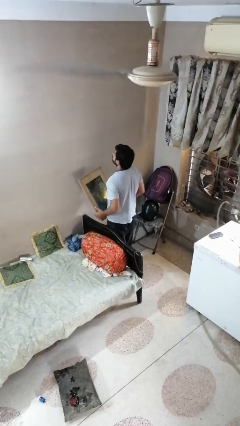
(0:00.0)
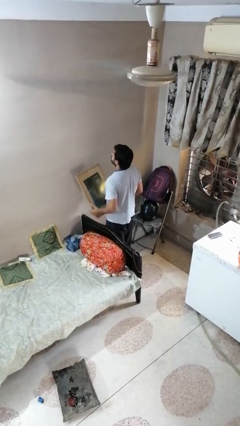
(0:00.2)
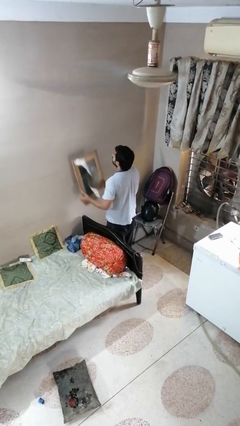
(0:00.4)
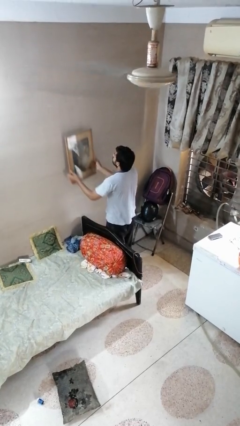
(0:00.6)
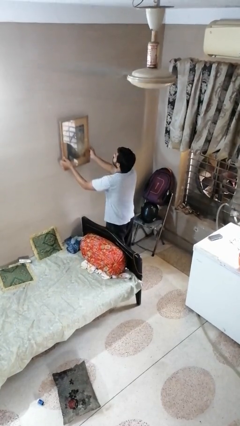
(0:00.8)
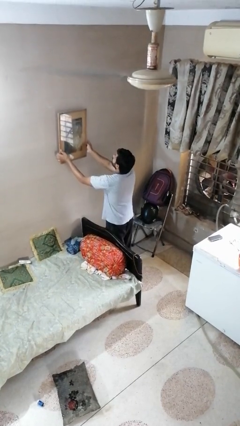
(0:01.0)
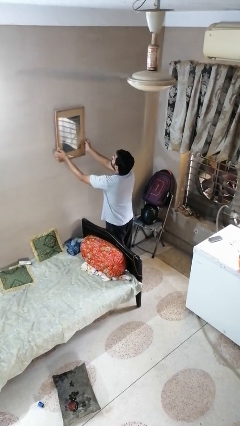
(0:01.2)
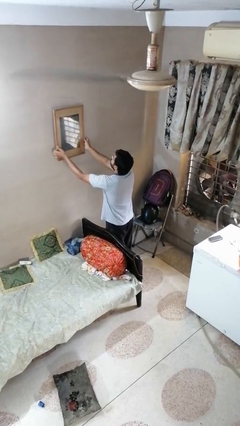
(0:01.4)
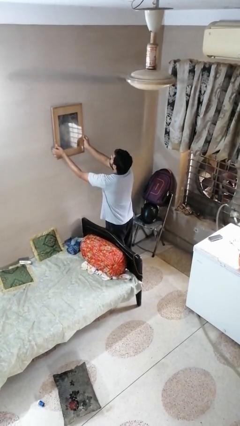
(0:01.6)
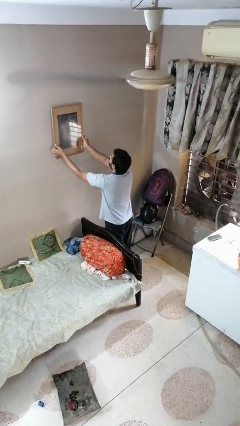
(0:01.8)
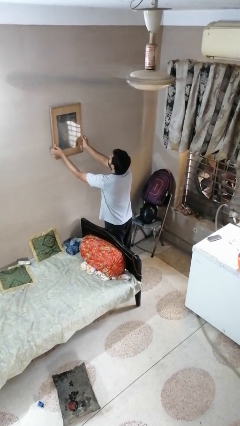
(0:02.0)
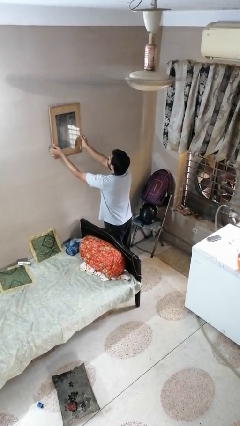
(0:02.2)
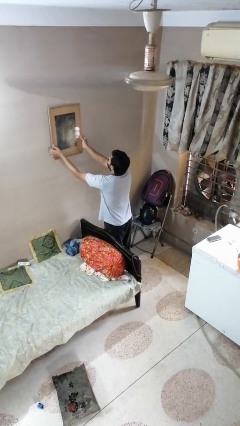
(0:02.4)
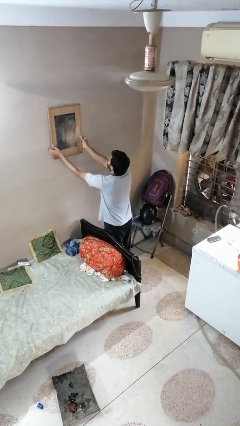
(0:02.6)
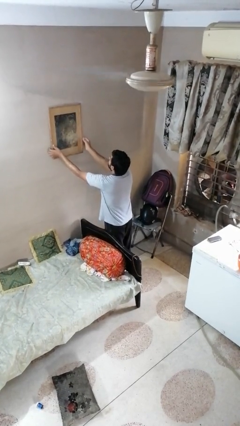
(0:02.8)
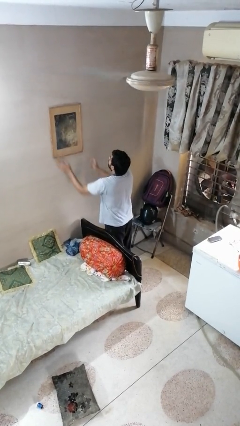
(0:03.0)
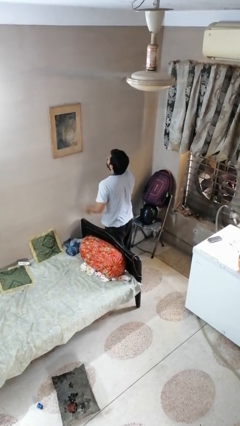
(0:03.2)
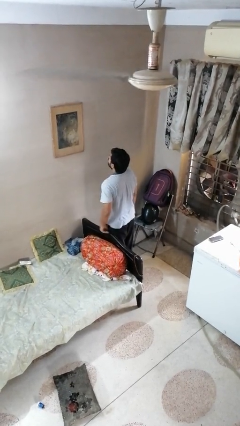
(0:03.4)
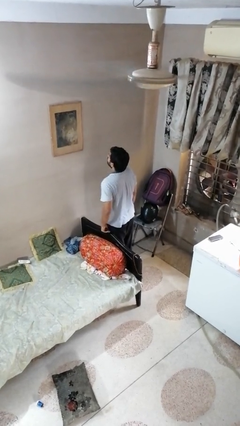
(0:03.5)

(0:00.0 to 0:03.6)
person puts up picture frame

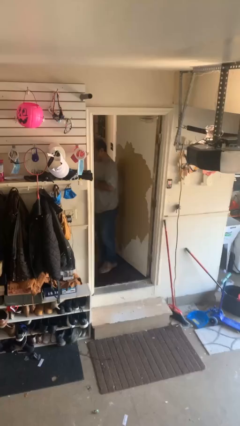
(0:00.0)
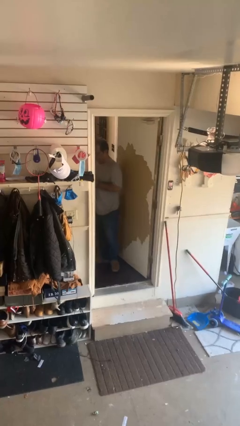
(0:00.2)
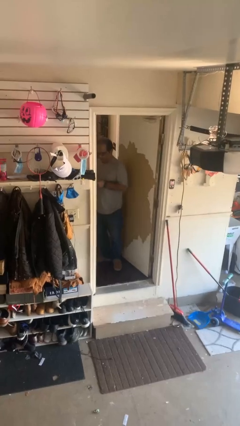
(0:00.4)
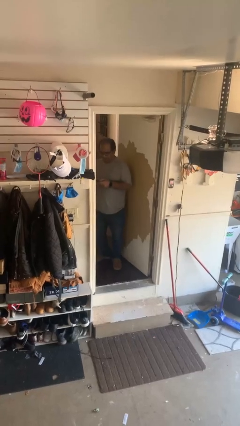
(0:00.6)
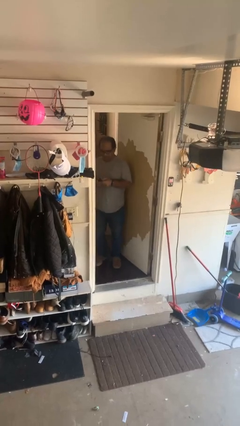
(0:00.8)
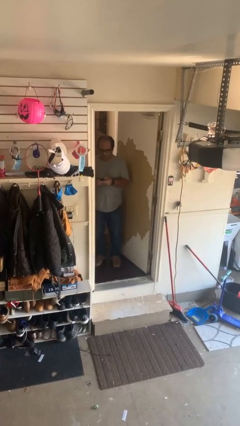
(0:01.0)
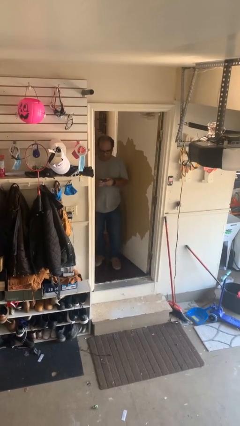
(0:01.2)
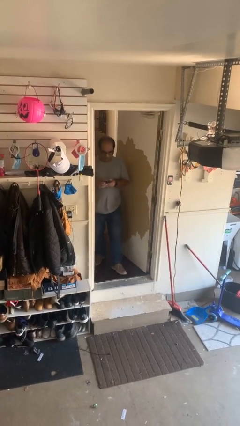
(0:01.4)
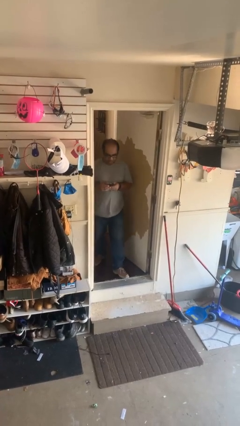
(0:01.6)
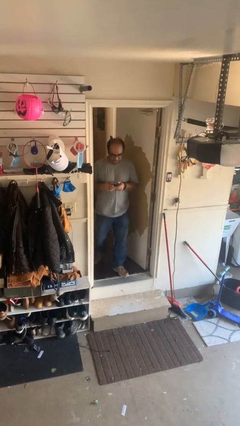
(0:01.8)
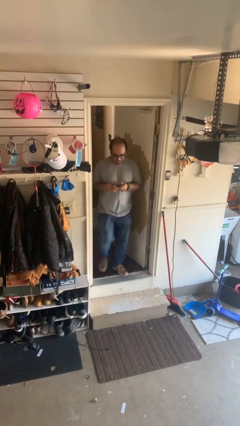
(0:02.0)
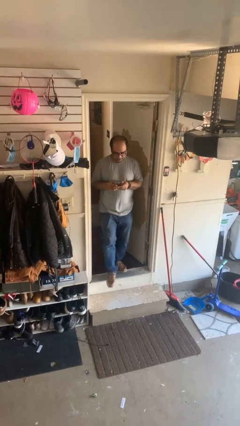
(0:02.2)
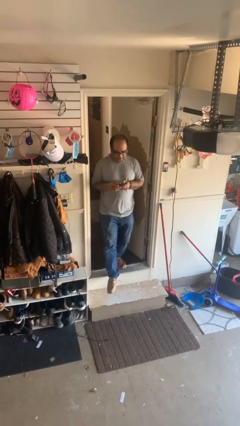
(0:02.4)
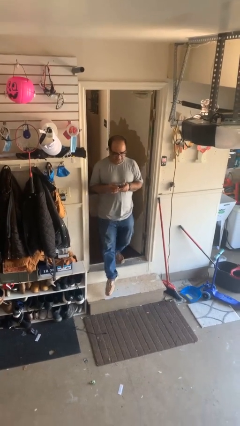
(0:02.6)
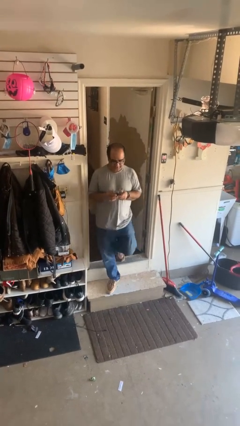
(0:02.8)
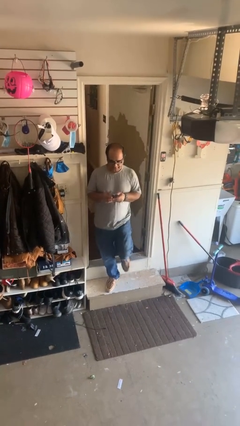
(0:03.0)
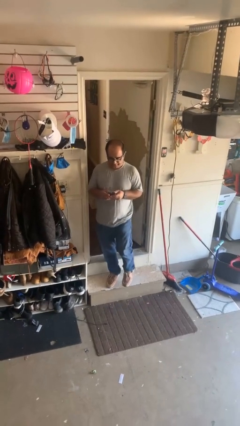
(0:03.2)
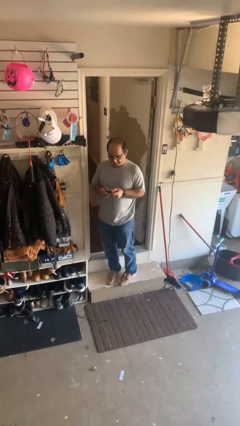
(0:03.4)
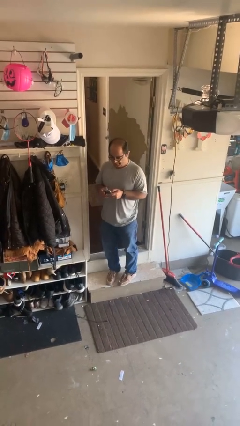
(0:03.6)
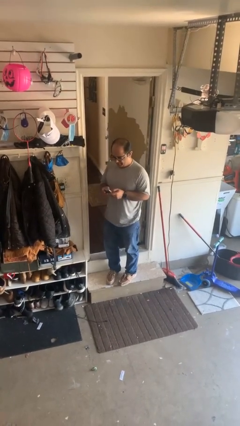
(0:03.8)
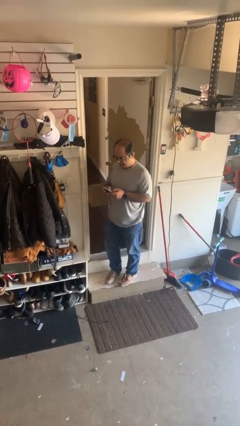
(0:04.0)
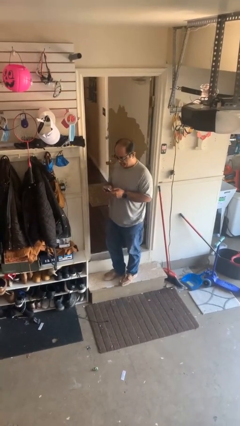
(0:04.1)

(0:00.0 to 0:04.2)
person enters scene through structure

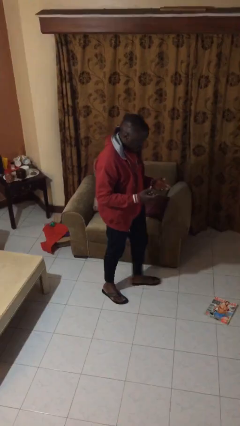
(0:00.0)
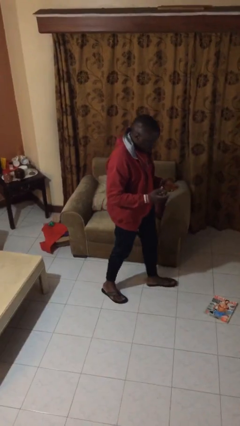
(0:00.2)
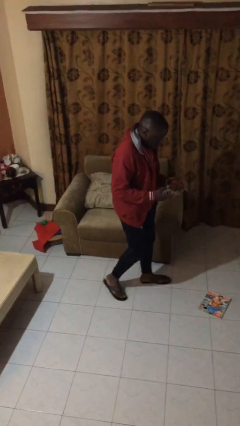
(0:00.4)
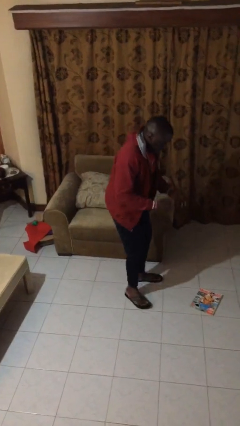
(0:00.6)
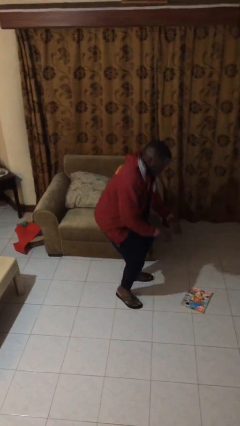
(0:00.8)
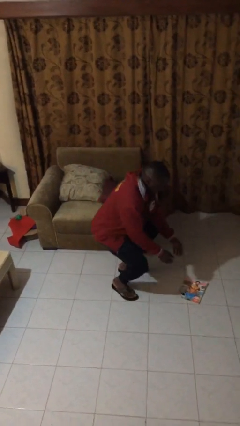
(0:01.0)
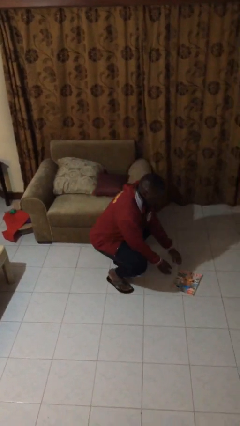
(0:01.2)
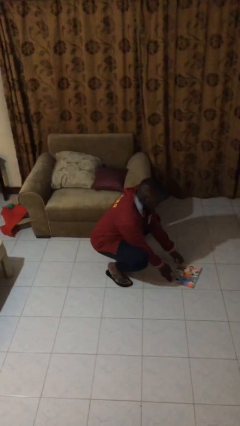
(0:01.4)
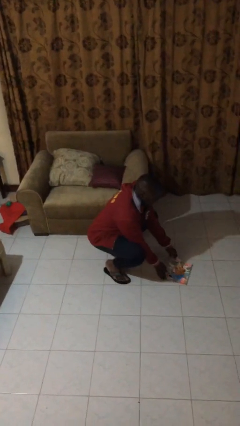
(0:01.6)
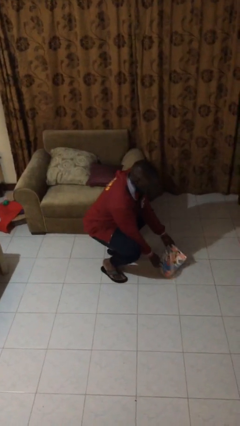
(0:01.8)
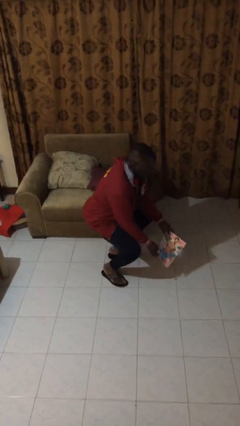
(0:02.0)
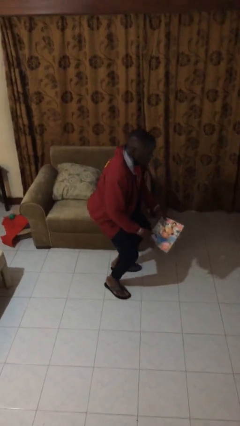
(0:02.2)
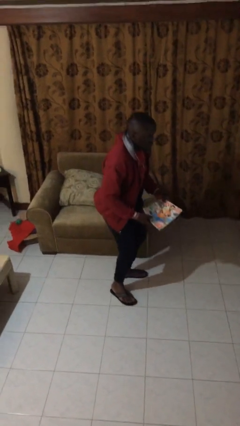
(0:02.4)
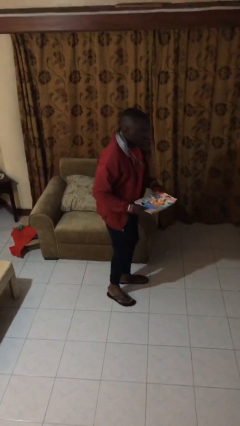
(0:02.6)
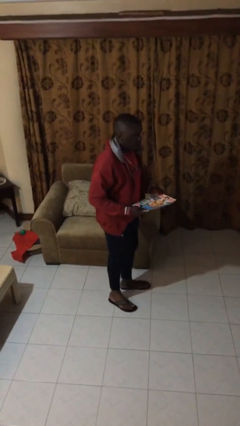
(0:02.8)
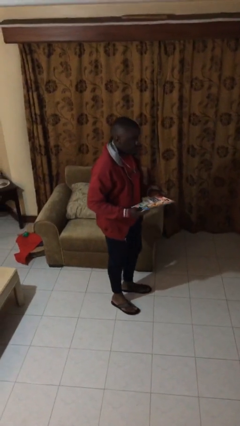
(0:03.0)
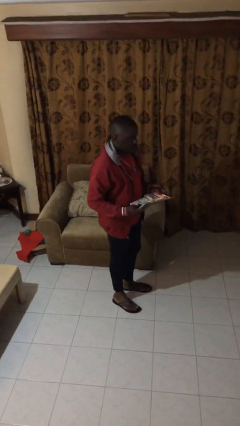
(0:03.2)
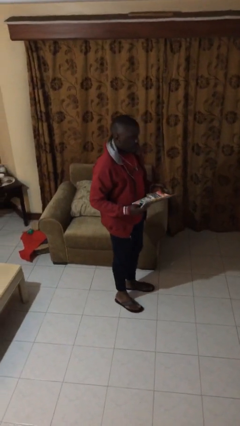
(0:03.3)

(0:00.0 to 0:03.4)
person picks up object from floor

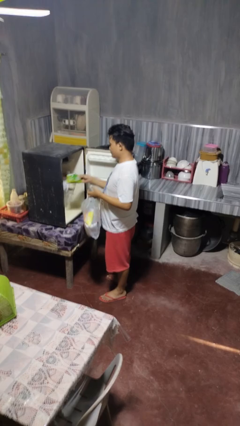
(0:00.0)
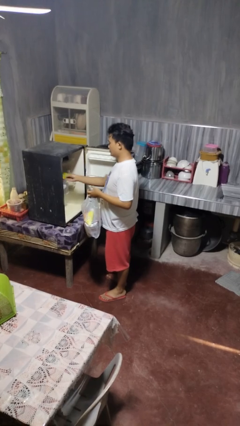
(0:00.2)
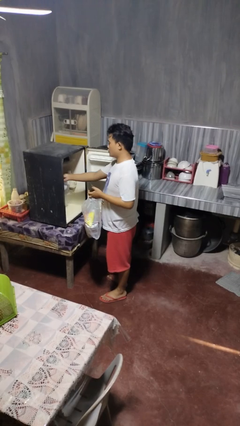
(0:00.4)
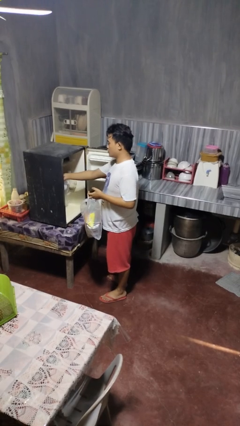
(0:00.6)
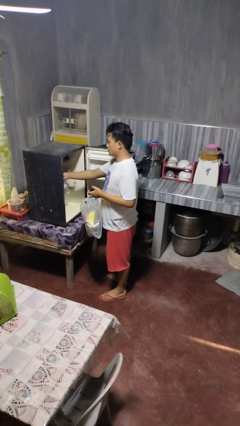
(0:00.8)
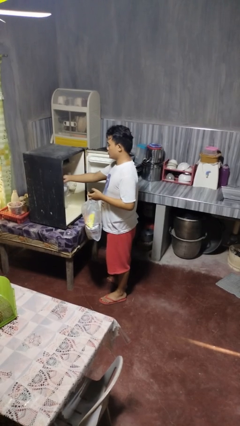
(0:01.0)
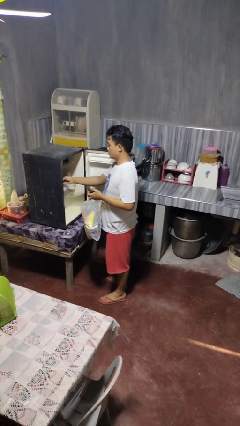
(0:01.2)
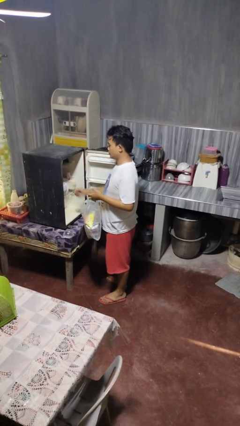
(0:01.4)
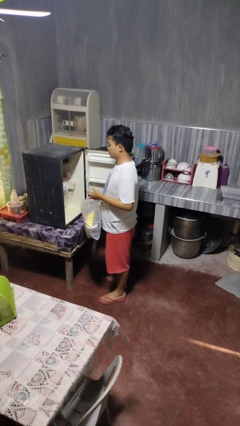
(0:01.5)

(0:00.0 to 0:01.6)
person loads groceries into refrigerator

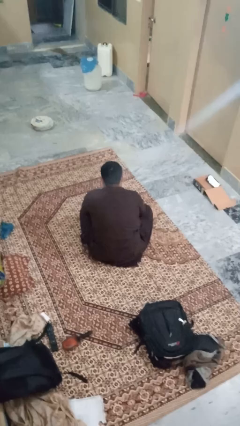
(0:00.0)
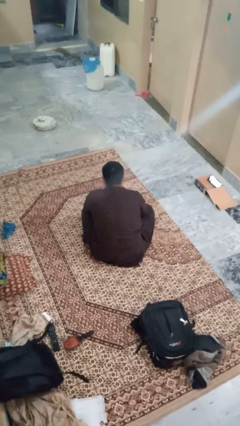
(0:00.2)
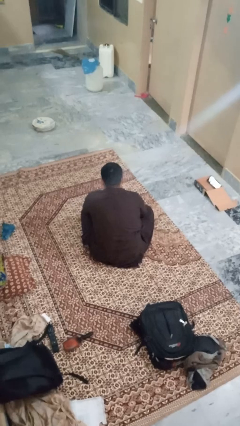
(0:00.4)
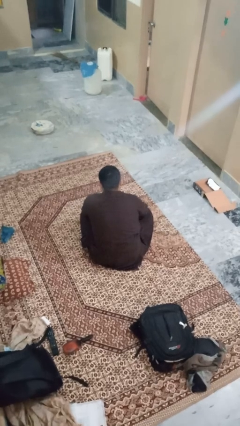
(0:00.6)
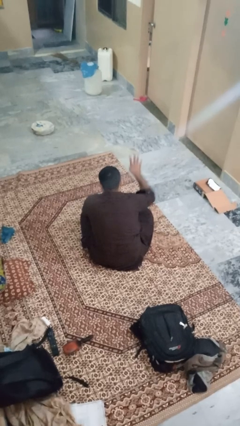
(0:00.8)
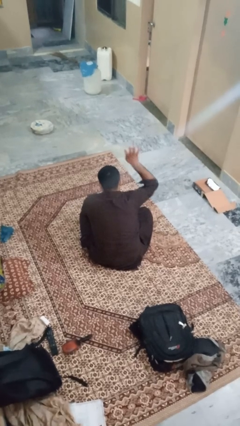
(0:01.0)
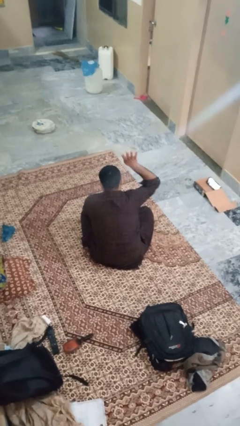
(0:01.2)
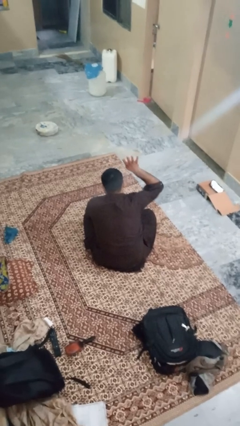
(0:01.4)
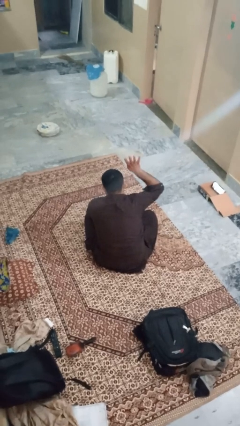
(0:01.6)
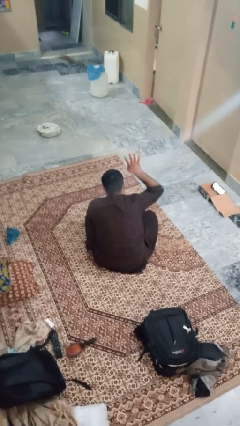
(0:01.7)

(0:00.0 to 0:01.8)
person gestures number four

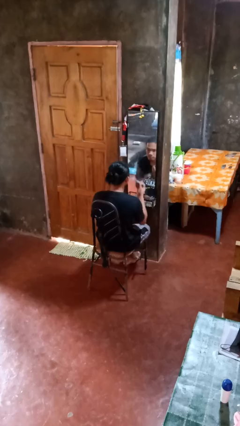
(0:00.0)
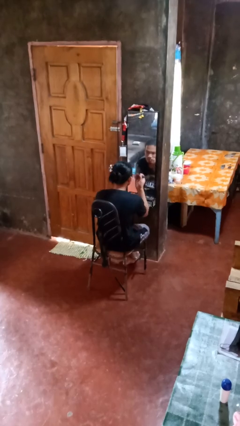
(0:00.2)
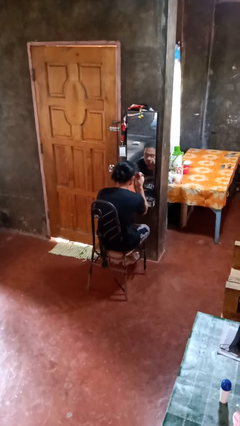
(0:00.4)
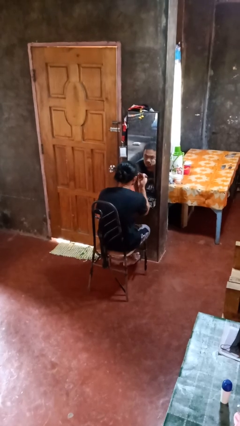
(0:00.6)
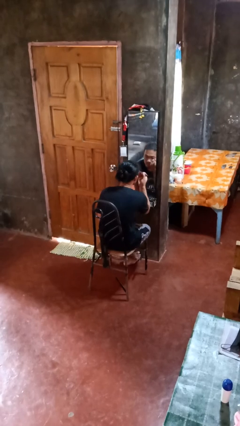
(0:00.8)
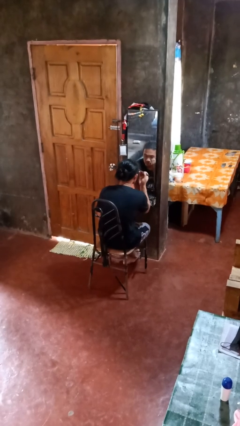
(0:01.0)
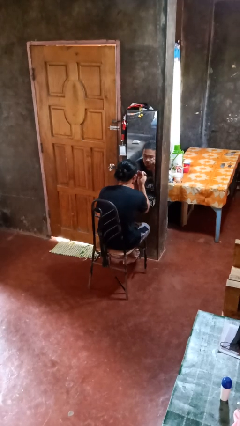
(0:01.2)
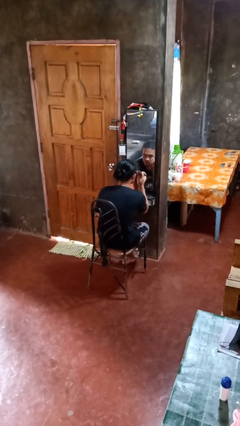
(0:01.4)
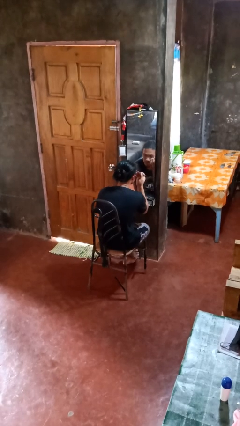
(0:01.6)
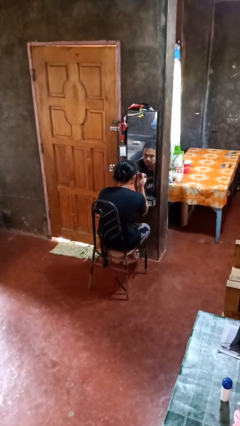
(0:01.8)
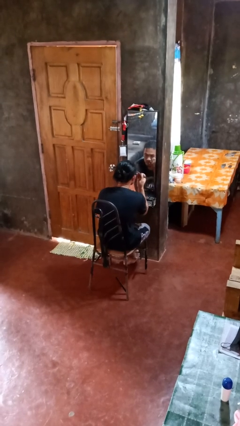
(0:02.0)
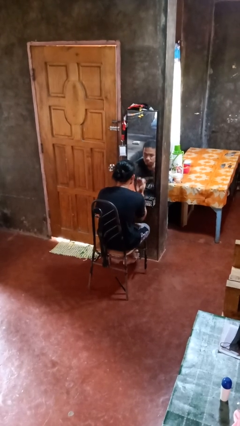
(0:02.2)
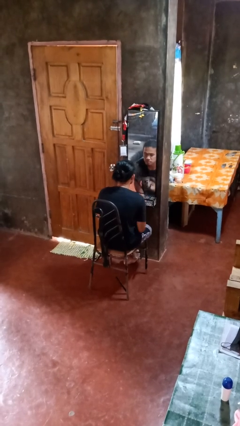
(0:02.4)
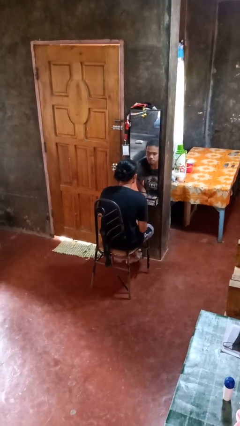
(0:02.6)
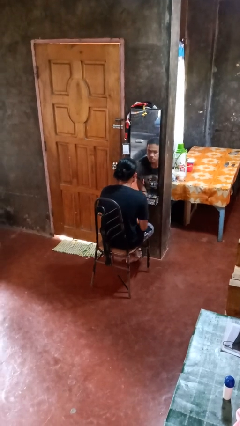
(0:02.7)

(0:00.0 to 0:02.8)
person applies eye makeup

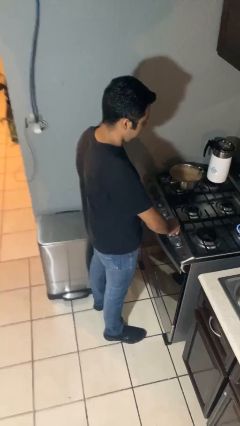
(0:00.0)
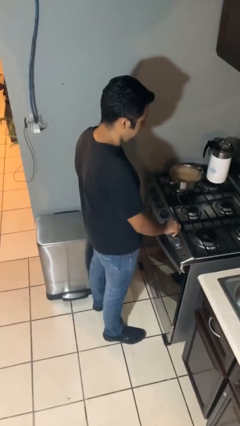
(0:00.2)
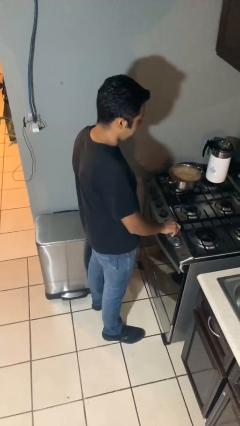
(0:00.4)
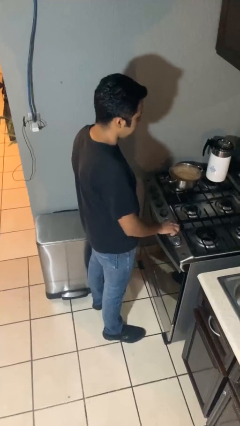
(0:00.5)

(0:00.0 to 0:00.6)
person turns off stovetop
